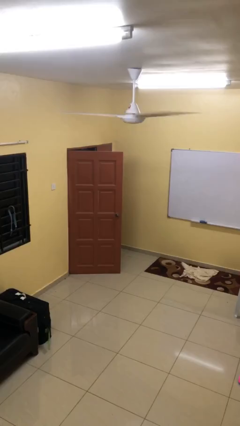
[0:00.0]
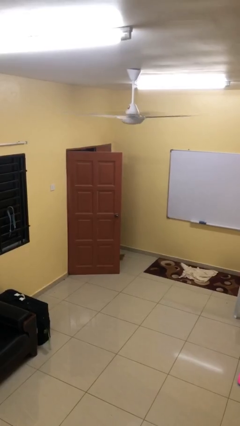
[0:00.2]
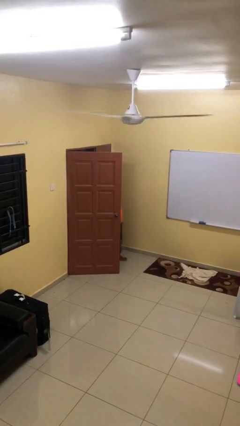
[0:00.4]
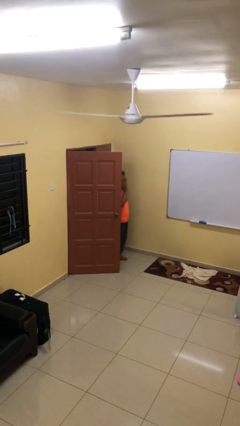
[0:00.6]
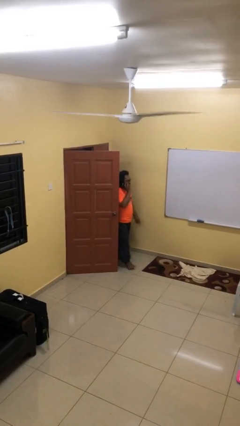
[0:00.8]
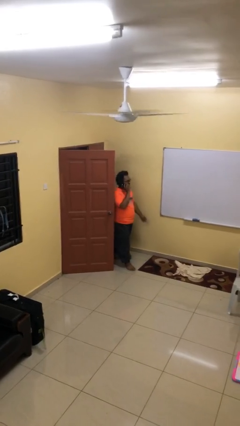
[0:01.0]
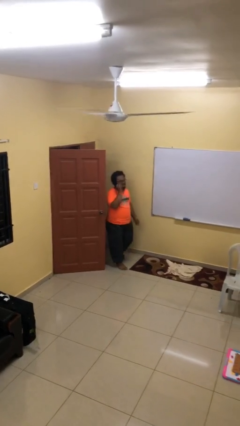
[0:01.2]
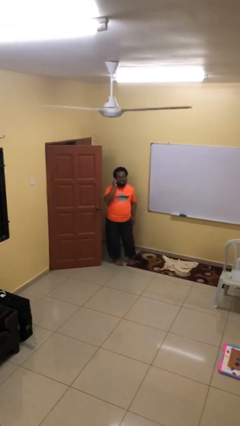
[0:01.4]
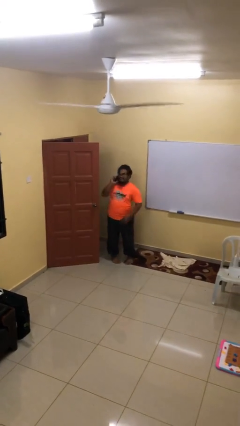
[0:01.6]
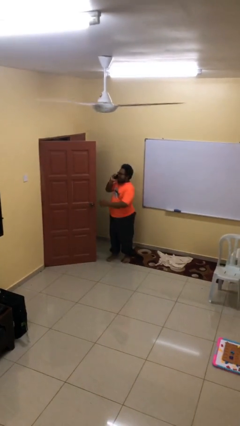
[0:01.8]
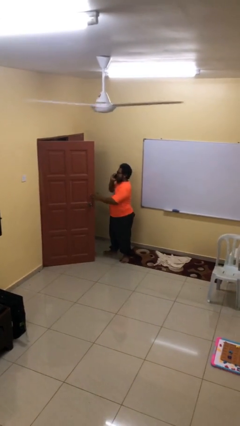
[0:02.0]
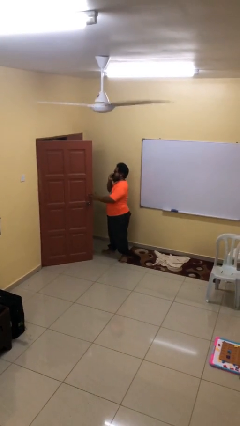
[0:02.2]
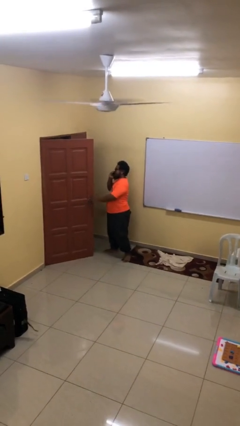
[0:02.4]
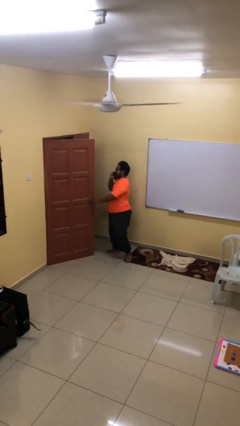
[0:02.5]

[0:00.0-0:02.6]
person enters scene through structure

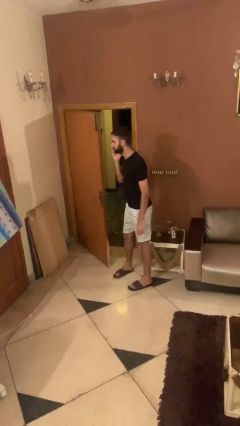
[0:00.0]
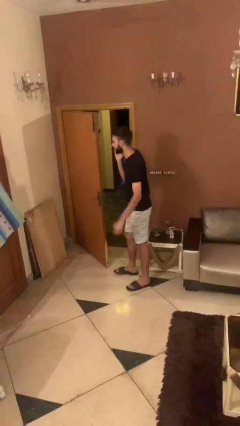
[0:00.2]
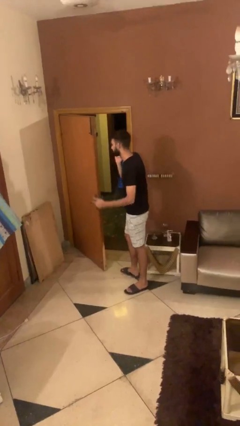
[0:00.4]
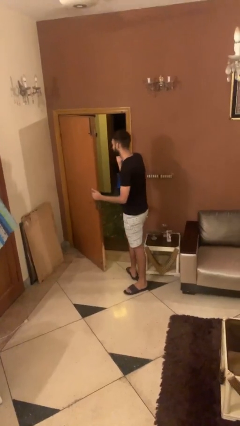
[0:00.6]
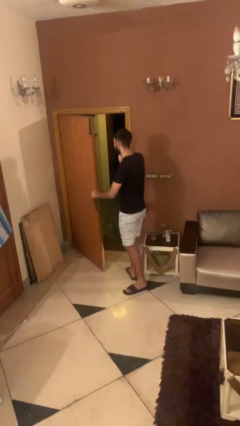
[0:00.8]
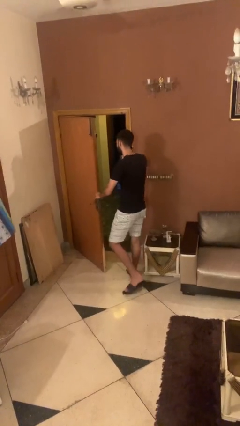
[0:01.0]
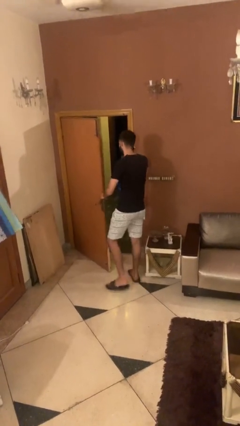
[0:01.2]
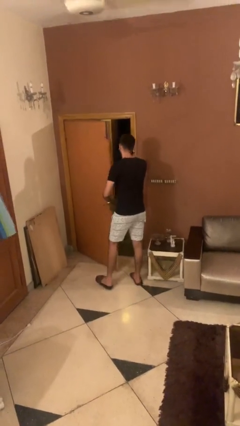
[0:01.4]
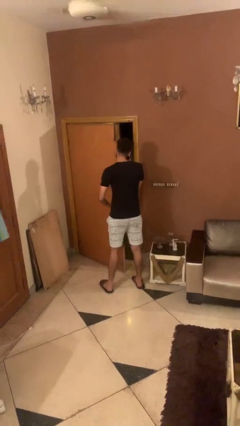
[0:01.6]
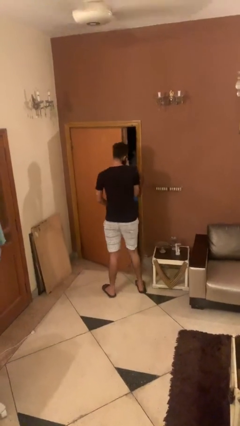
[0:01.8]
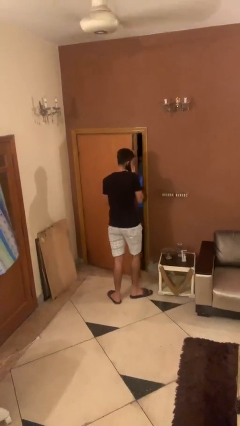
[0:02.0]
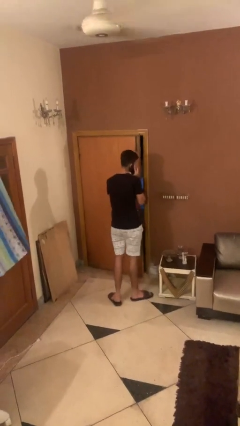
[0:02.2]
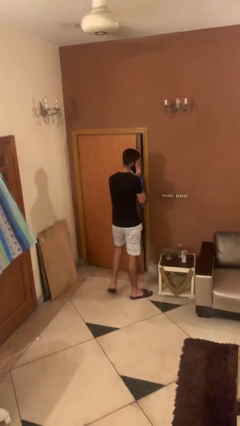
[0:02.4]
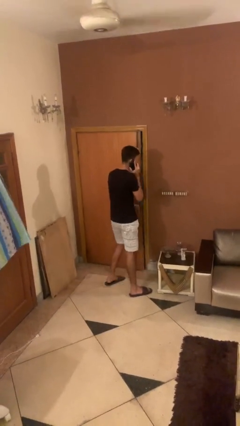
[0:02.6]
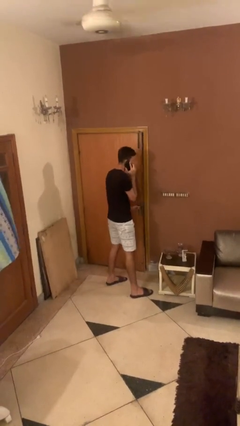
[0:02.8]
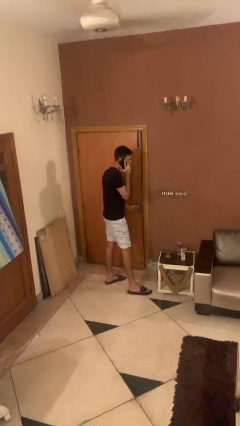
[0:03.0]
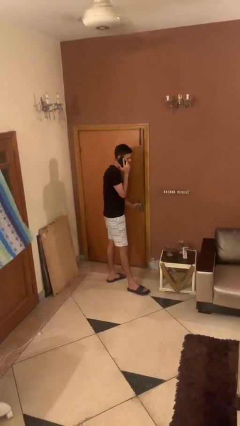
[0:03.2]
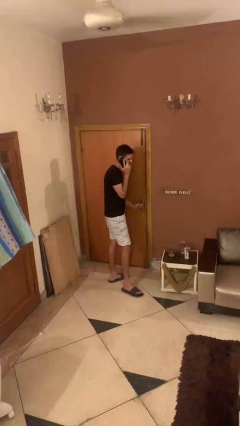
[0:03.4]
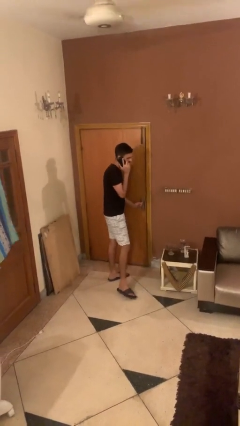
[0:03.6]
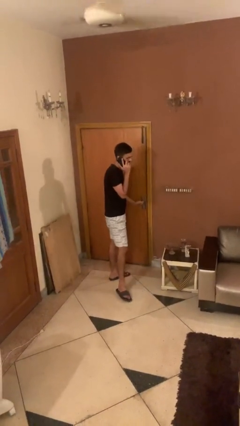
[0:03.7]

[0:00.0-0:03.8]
person closes facility door

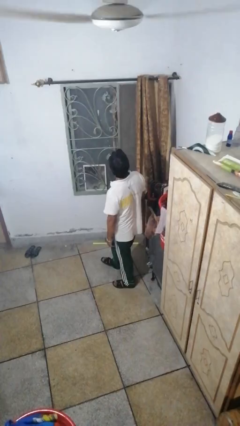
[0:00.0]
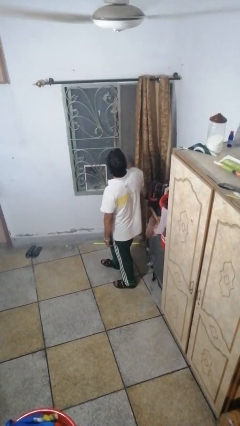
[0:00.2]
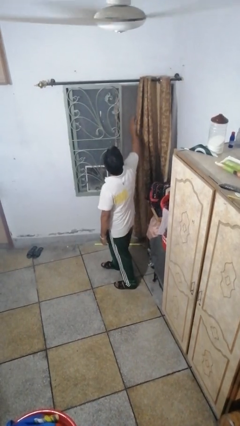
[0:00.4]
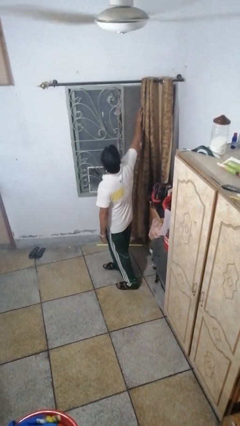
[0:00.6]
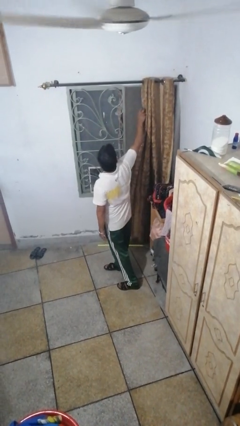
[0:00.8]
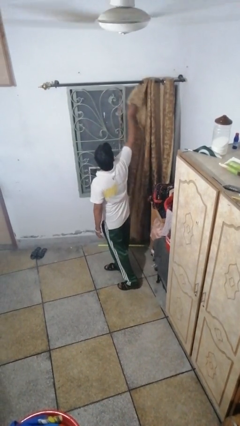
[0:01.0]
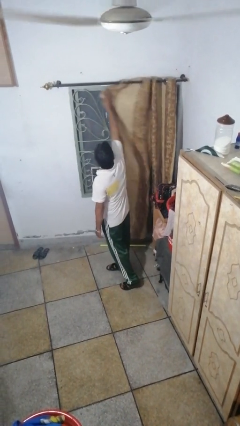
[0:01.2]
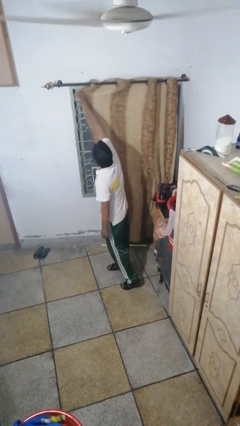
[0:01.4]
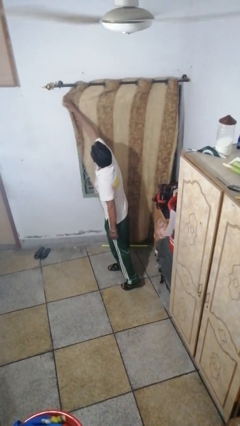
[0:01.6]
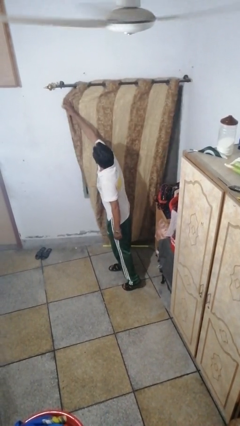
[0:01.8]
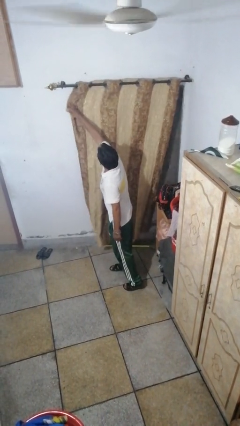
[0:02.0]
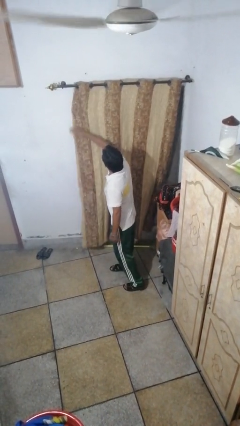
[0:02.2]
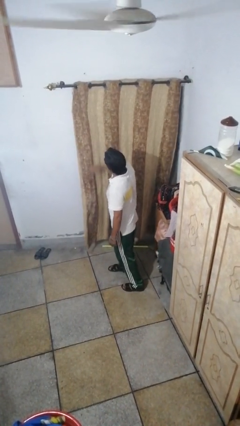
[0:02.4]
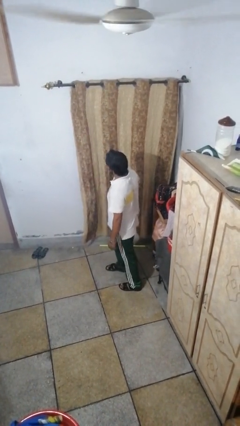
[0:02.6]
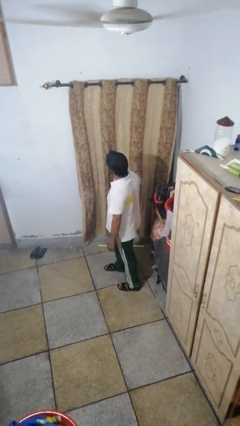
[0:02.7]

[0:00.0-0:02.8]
person closes curtains

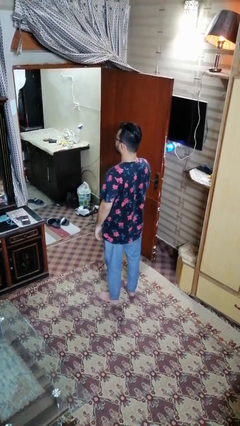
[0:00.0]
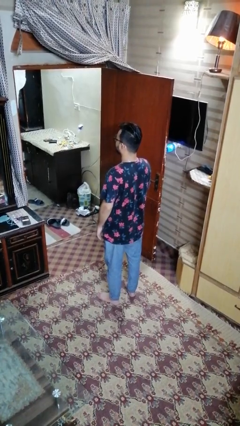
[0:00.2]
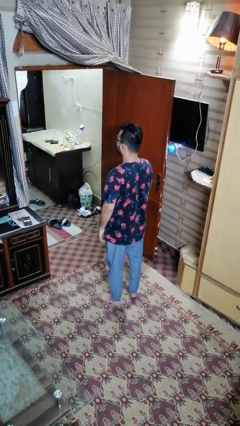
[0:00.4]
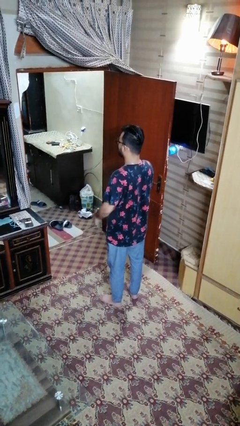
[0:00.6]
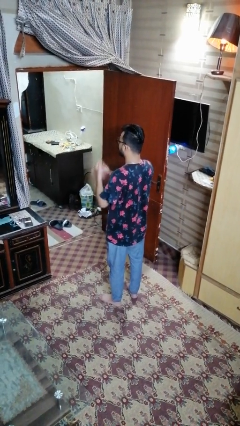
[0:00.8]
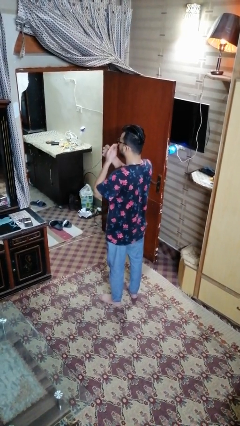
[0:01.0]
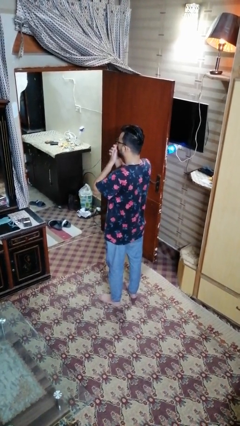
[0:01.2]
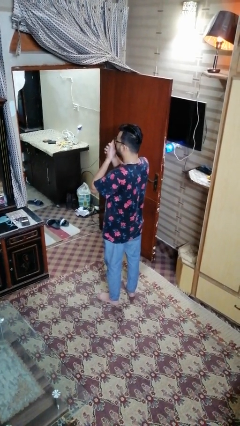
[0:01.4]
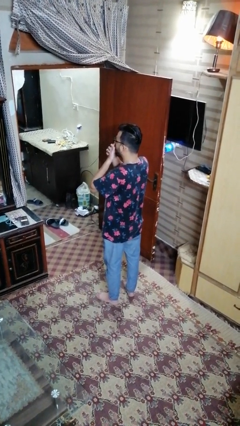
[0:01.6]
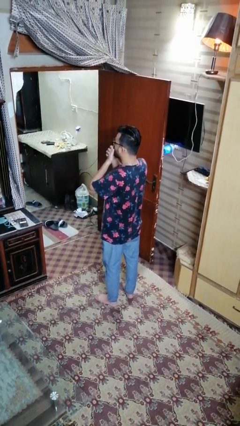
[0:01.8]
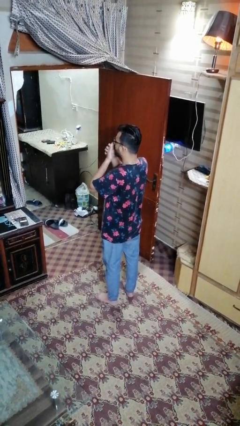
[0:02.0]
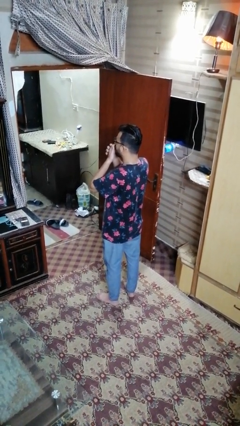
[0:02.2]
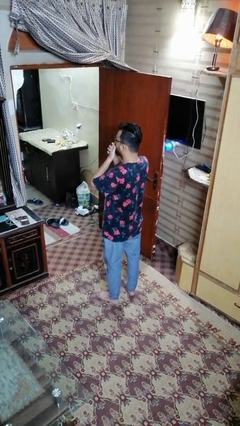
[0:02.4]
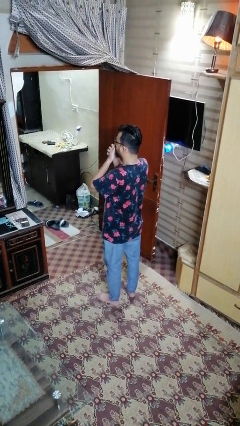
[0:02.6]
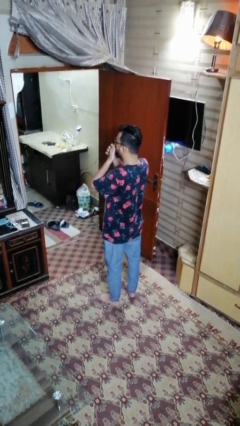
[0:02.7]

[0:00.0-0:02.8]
person yawns

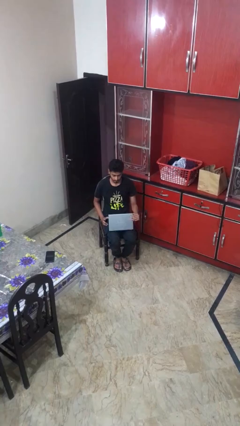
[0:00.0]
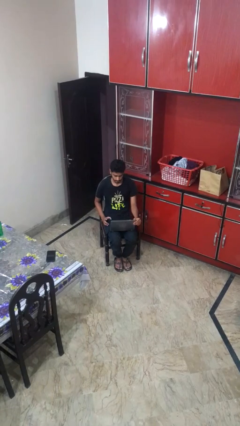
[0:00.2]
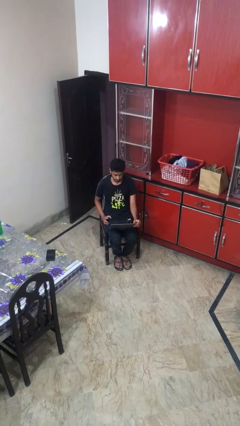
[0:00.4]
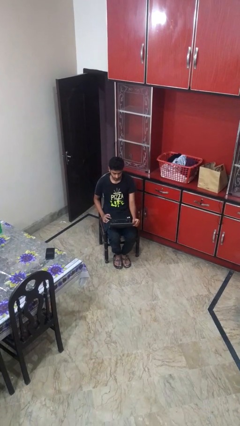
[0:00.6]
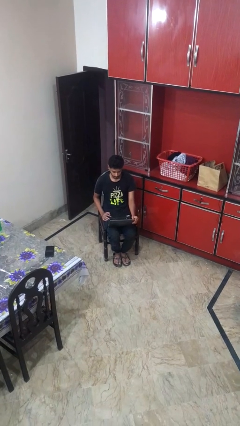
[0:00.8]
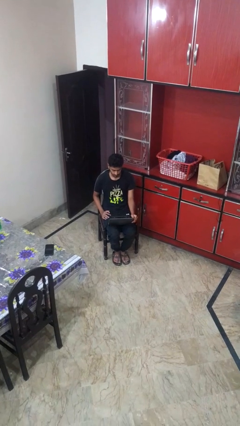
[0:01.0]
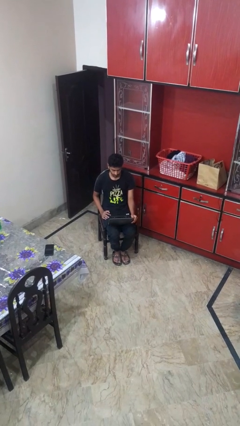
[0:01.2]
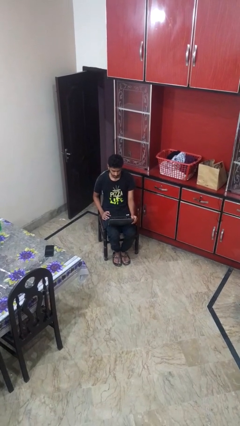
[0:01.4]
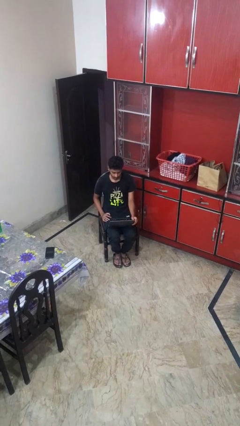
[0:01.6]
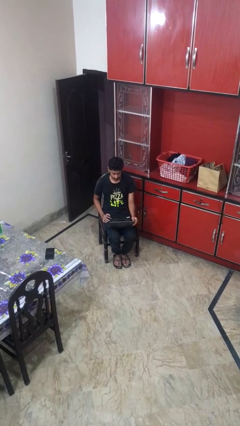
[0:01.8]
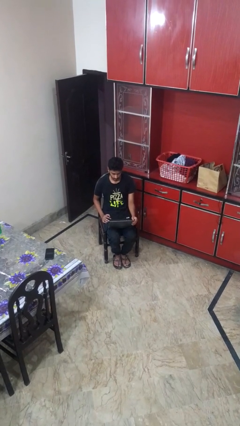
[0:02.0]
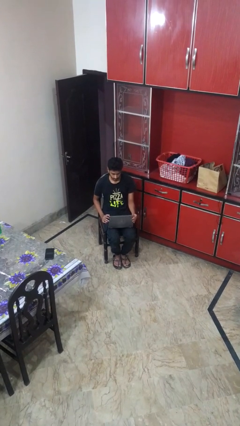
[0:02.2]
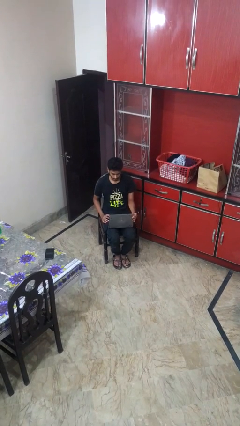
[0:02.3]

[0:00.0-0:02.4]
person opens laptop

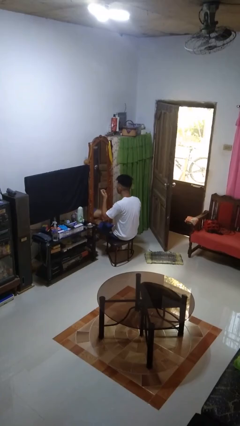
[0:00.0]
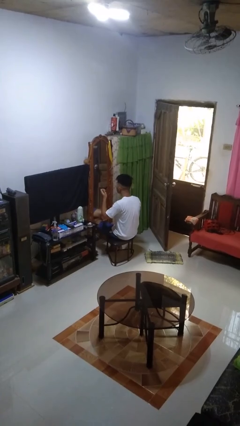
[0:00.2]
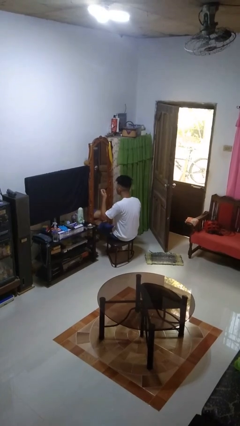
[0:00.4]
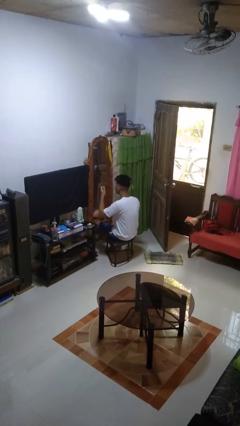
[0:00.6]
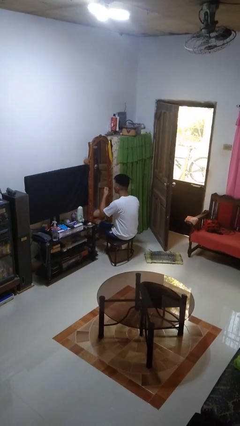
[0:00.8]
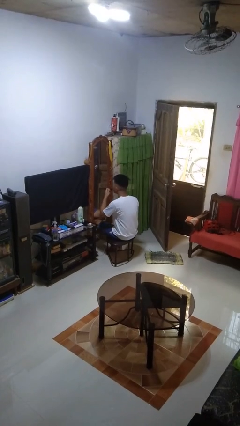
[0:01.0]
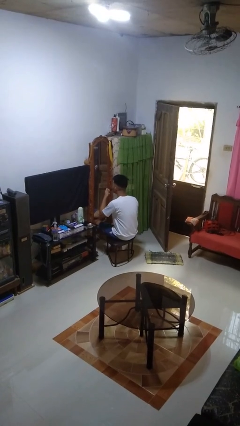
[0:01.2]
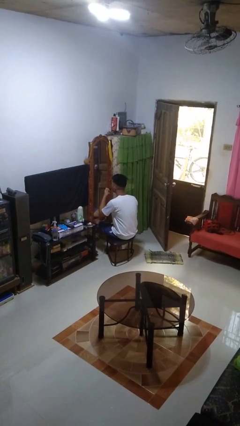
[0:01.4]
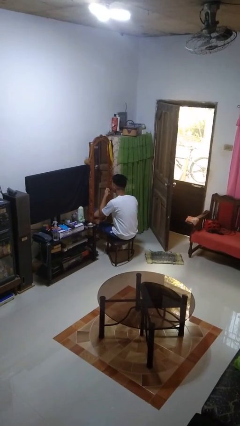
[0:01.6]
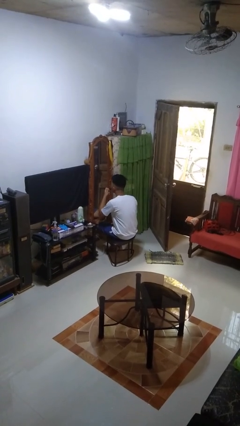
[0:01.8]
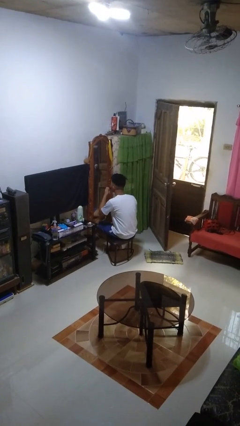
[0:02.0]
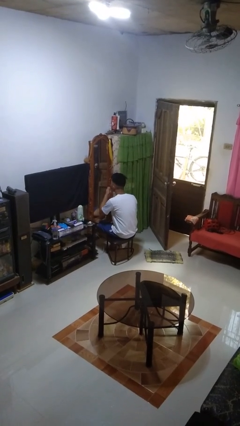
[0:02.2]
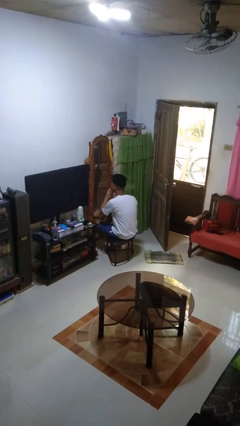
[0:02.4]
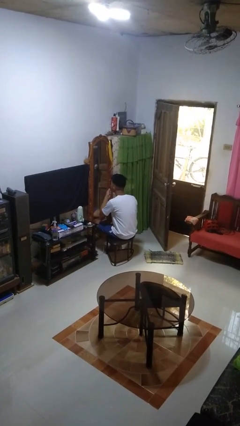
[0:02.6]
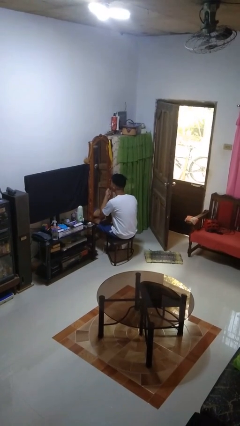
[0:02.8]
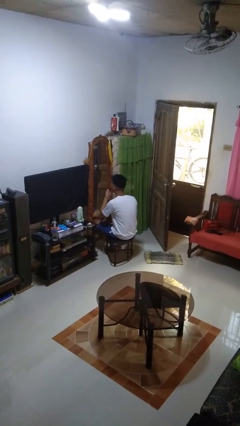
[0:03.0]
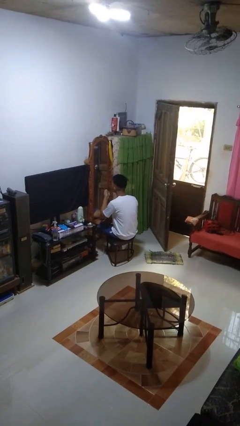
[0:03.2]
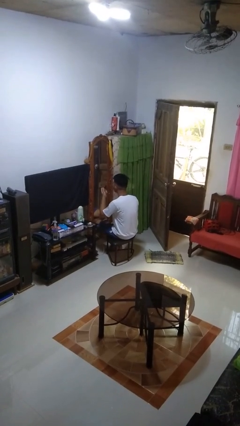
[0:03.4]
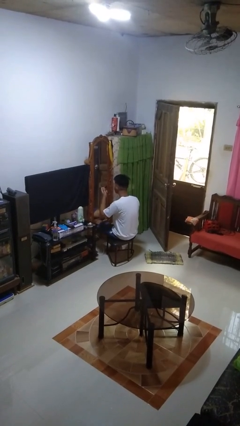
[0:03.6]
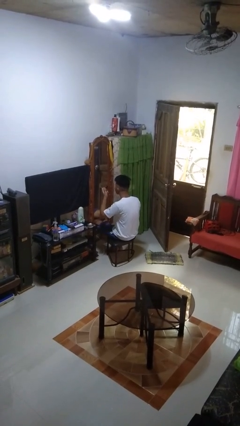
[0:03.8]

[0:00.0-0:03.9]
person applies lip makeup
